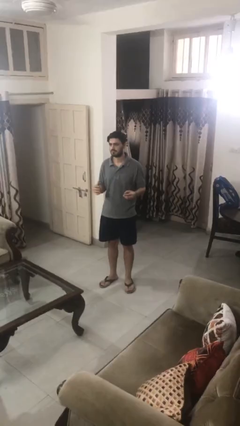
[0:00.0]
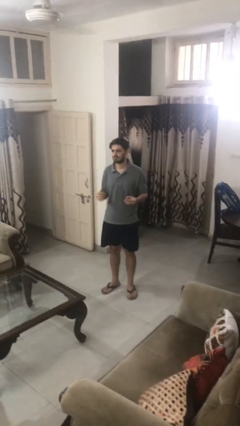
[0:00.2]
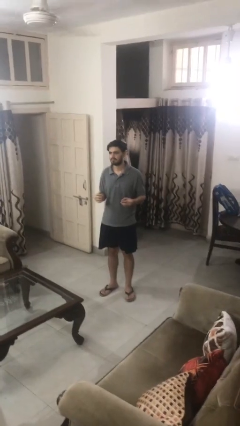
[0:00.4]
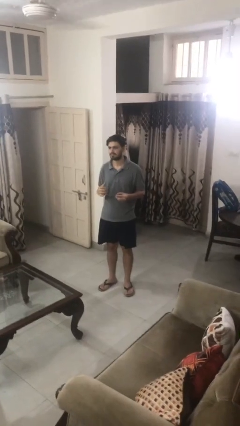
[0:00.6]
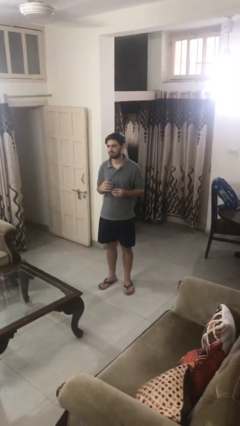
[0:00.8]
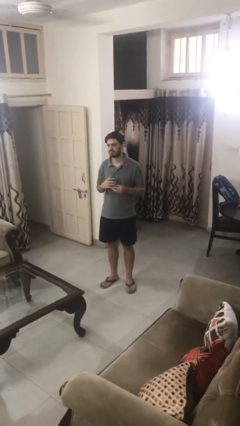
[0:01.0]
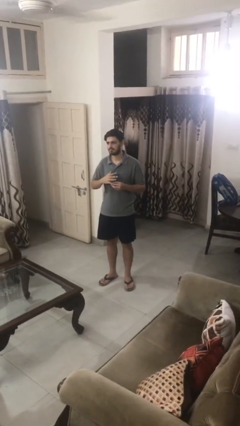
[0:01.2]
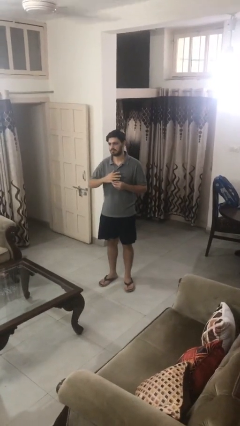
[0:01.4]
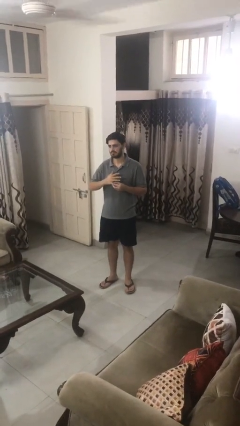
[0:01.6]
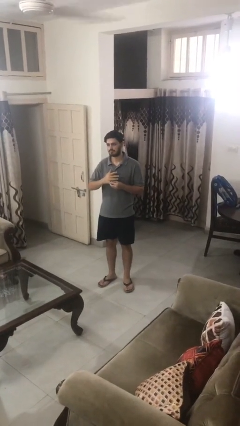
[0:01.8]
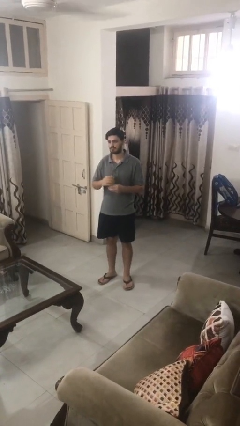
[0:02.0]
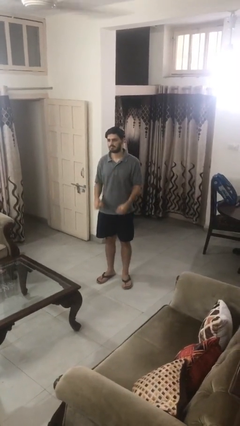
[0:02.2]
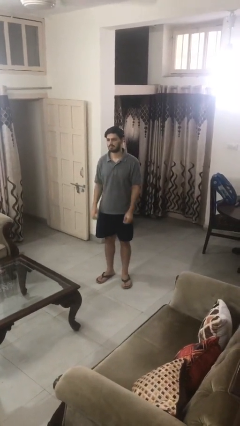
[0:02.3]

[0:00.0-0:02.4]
person puts on ring

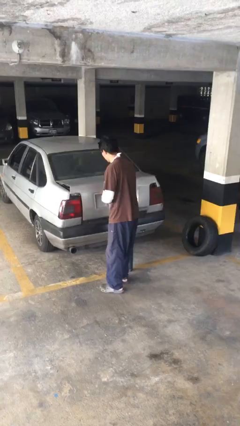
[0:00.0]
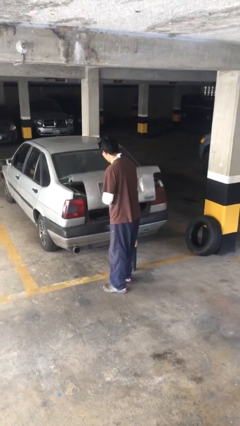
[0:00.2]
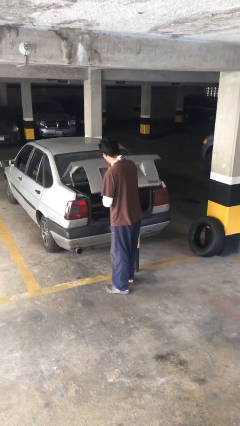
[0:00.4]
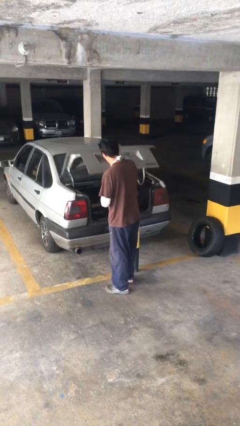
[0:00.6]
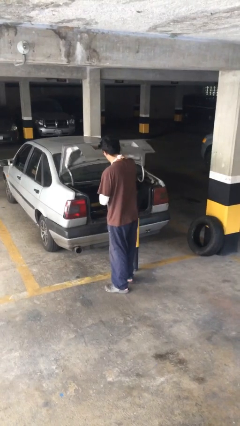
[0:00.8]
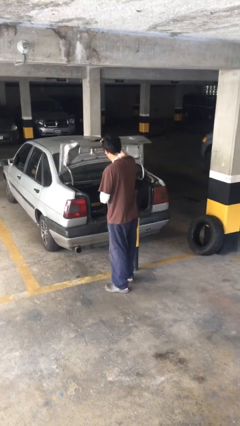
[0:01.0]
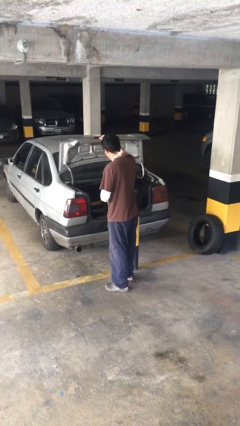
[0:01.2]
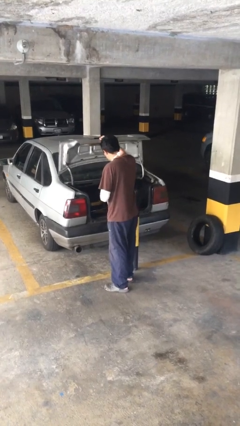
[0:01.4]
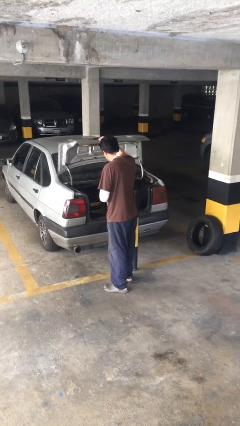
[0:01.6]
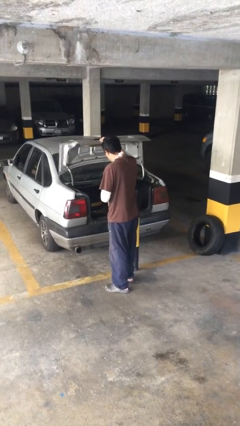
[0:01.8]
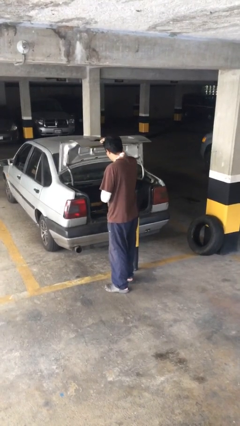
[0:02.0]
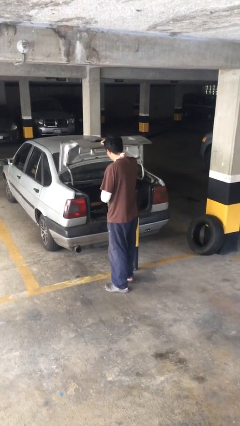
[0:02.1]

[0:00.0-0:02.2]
person opens car trunk

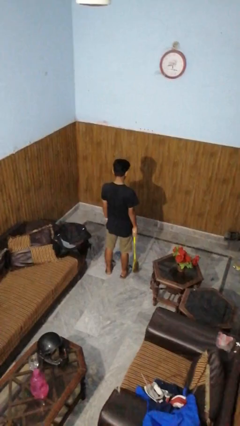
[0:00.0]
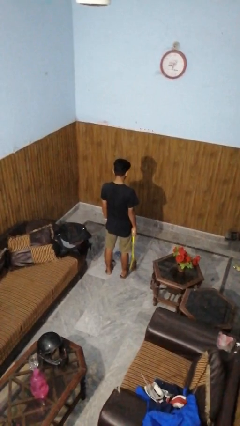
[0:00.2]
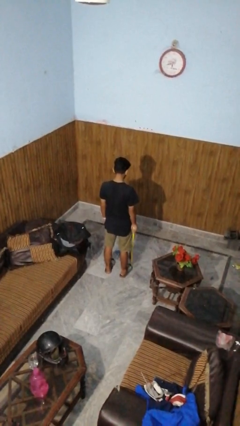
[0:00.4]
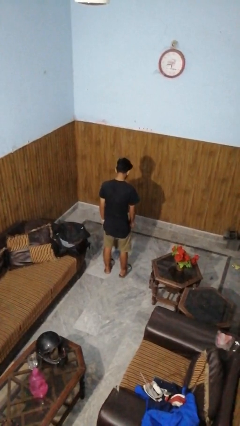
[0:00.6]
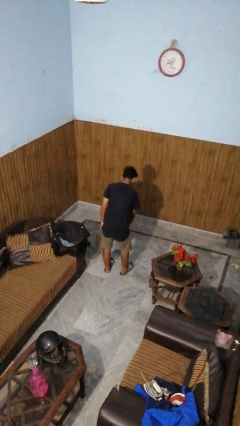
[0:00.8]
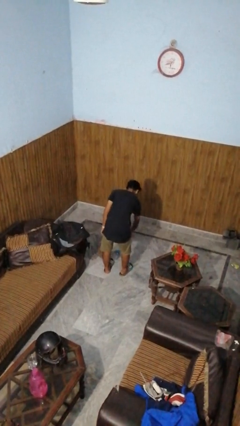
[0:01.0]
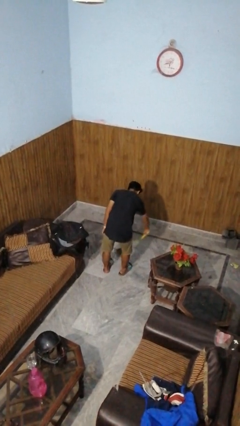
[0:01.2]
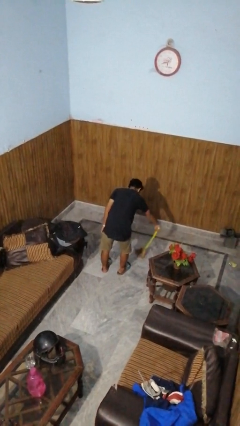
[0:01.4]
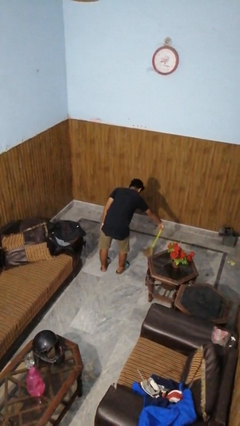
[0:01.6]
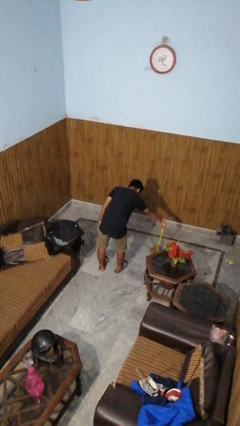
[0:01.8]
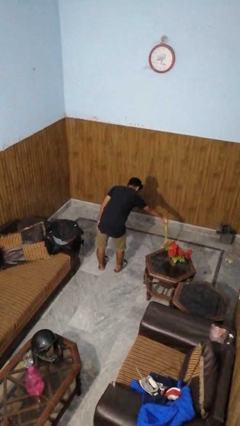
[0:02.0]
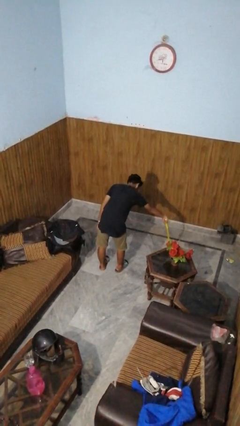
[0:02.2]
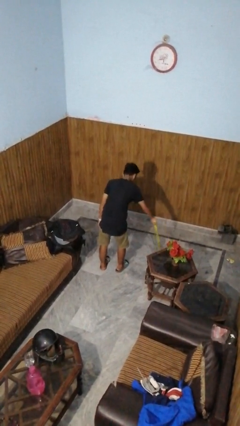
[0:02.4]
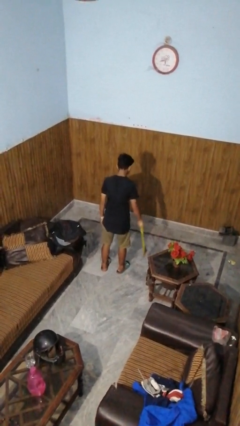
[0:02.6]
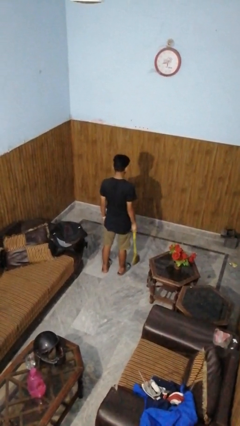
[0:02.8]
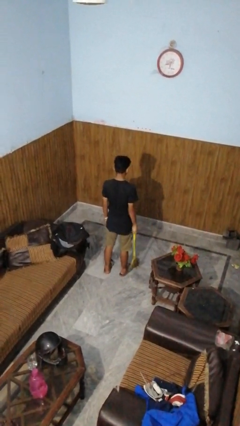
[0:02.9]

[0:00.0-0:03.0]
person sweeps floor

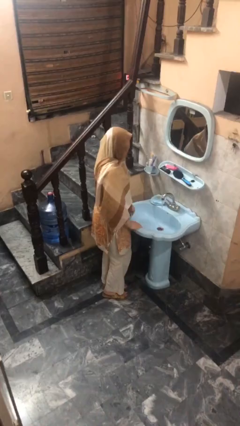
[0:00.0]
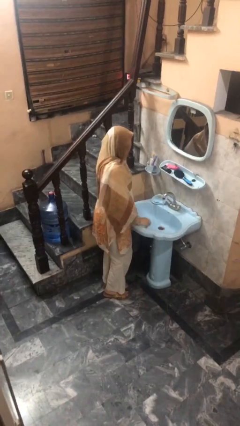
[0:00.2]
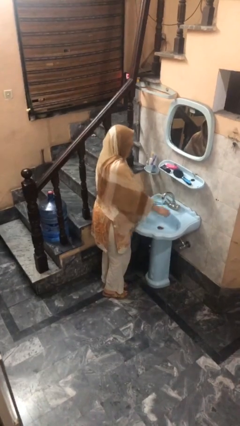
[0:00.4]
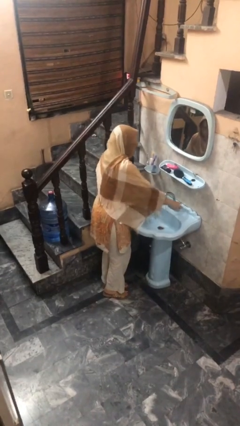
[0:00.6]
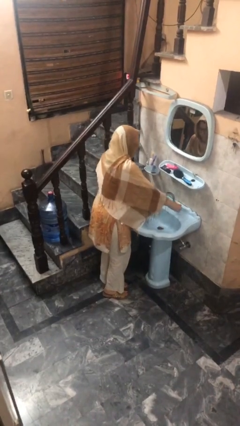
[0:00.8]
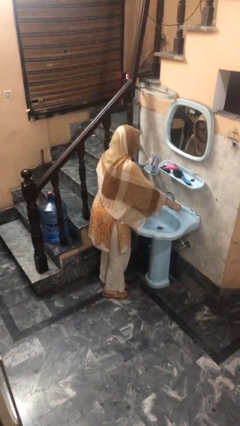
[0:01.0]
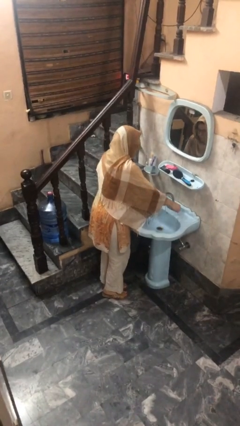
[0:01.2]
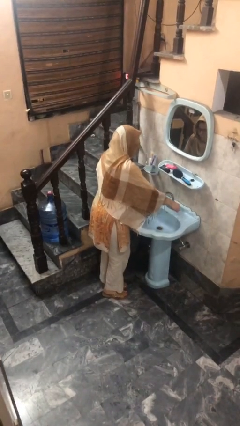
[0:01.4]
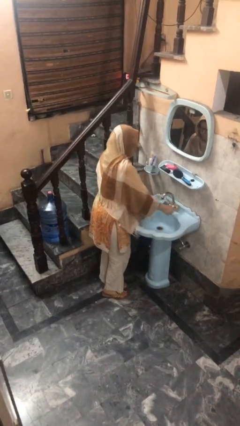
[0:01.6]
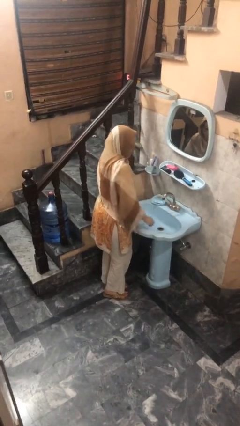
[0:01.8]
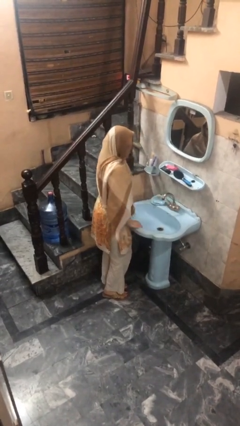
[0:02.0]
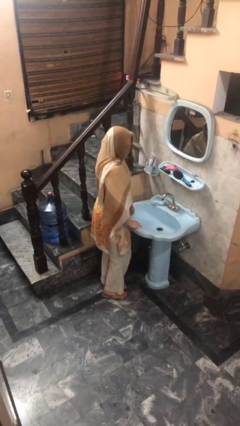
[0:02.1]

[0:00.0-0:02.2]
person turns off faucet

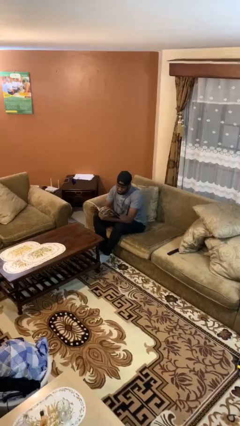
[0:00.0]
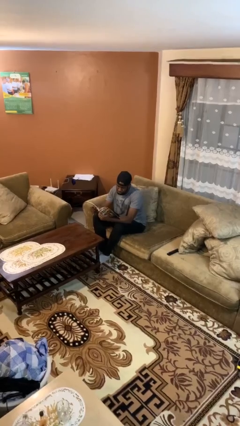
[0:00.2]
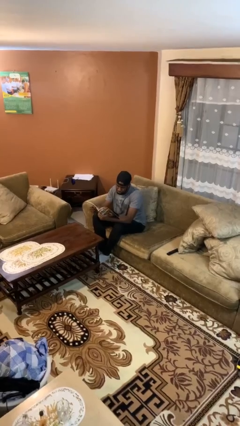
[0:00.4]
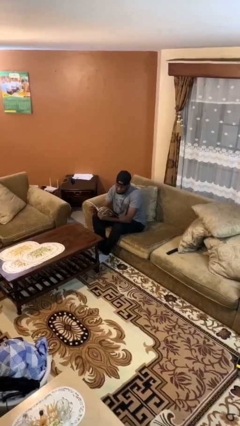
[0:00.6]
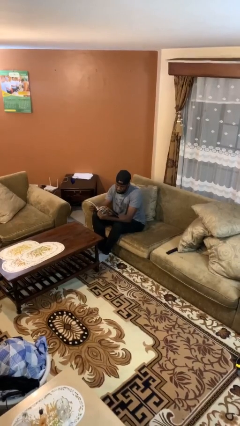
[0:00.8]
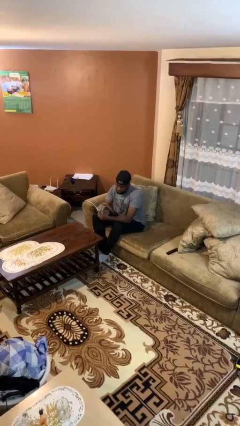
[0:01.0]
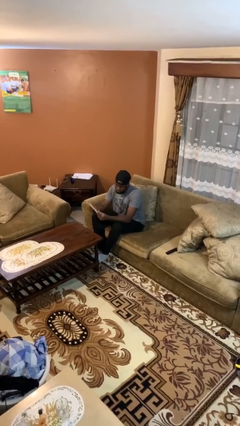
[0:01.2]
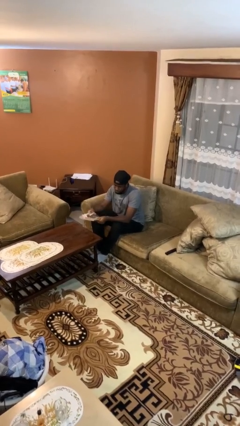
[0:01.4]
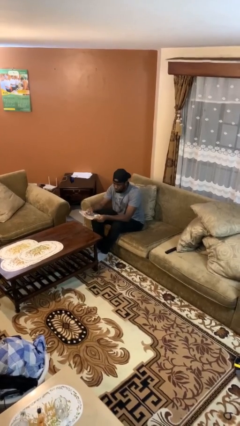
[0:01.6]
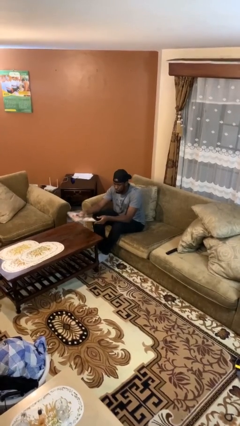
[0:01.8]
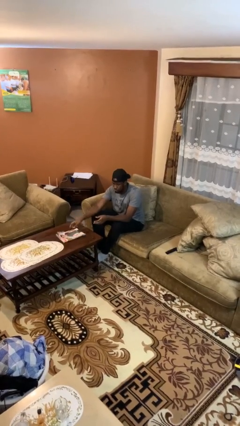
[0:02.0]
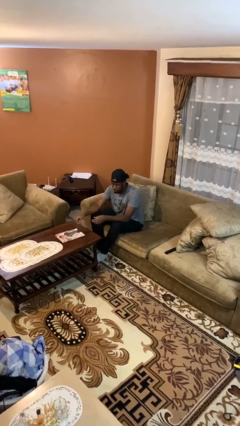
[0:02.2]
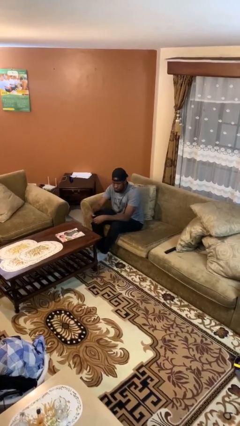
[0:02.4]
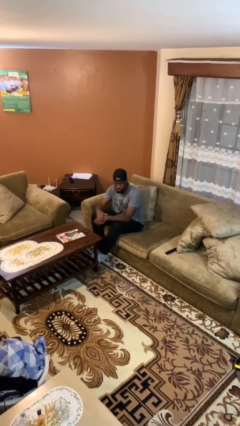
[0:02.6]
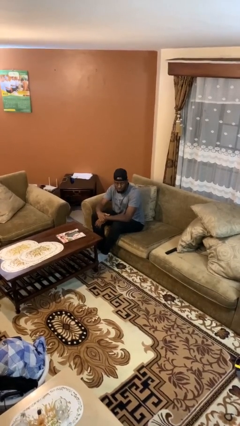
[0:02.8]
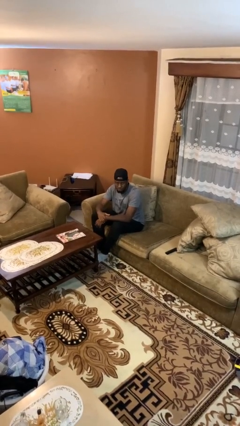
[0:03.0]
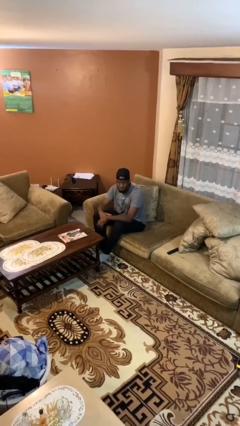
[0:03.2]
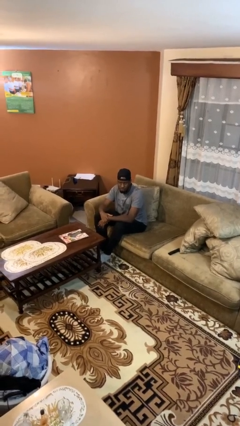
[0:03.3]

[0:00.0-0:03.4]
person puts down object on table

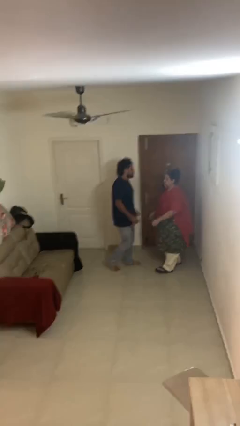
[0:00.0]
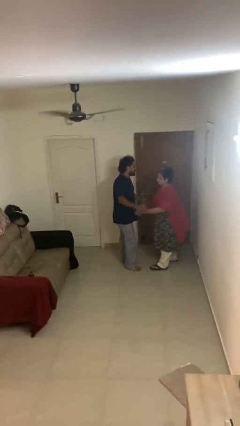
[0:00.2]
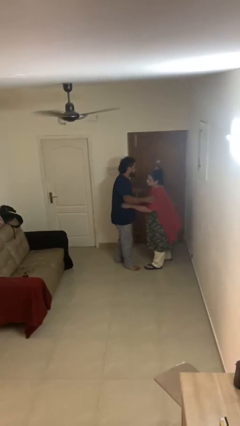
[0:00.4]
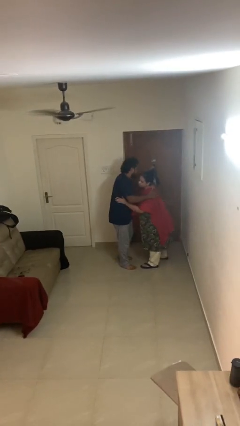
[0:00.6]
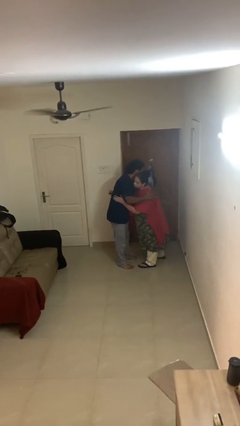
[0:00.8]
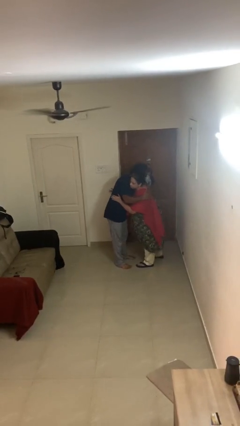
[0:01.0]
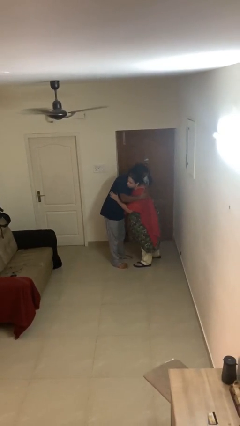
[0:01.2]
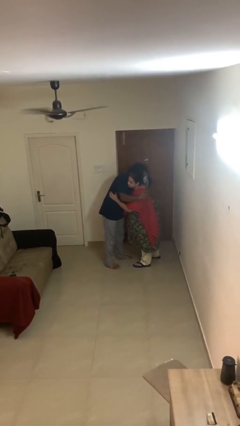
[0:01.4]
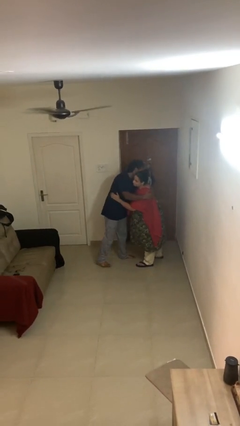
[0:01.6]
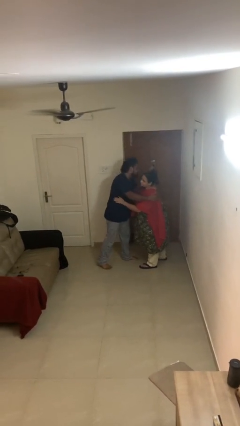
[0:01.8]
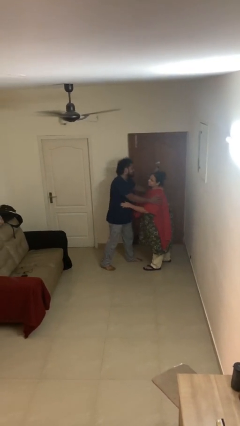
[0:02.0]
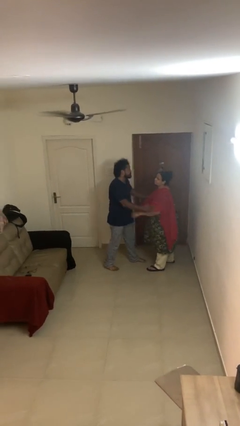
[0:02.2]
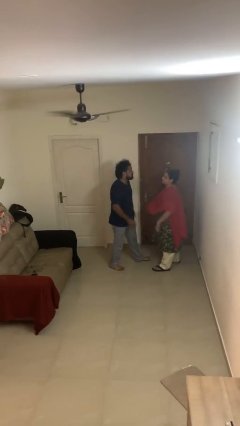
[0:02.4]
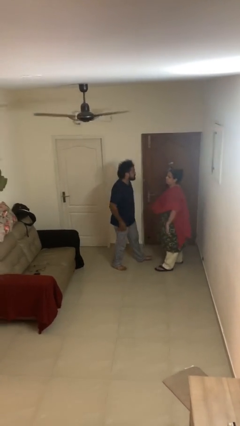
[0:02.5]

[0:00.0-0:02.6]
person embraces person

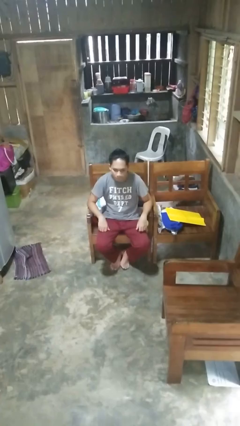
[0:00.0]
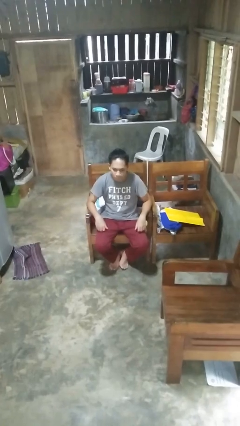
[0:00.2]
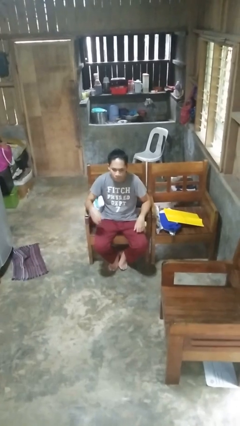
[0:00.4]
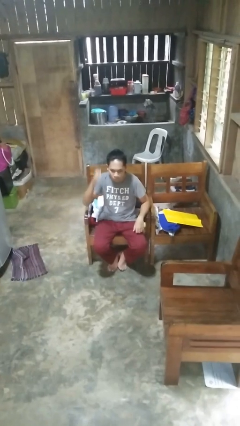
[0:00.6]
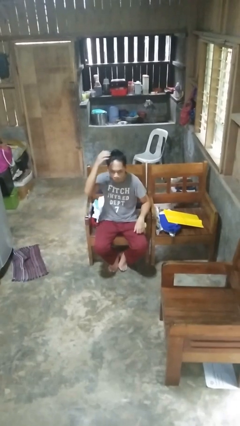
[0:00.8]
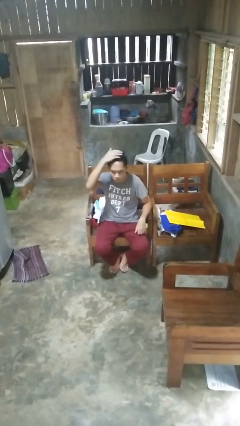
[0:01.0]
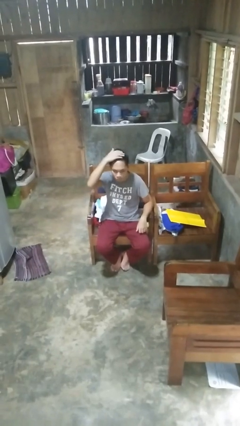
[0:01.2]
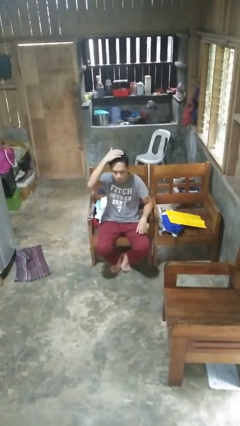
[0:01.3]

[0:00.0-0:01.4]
person pats head
